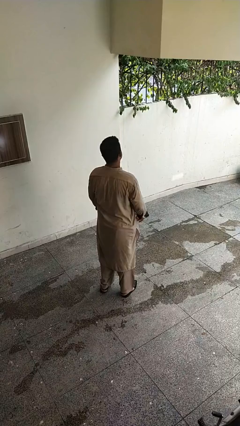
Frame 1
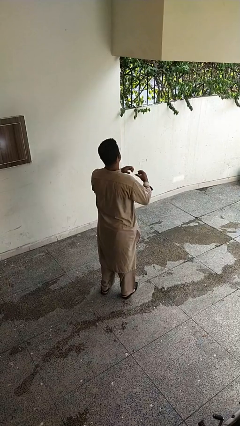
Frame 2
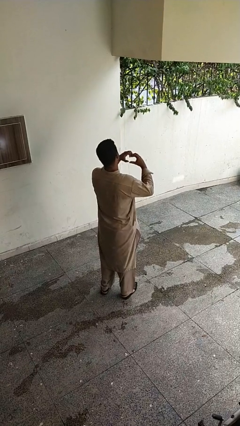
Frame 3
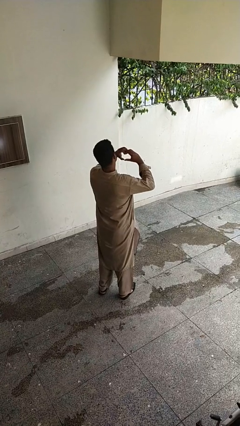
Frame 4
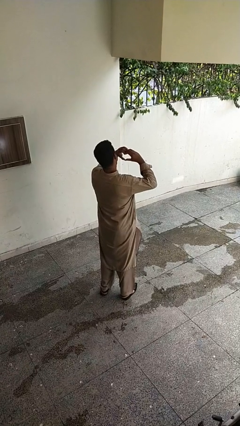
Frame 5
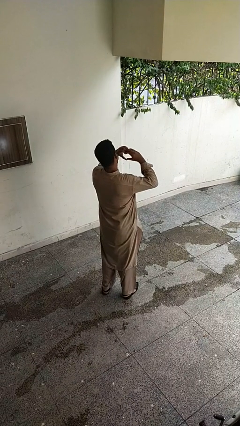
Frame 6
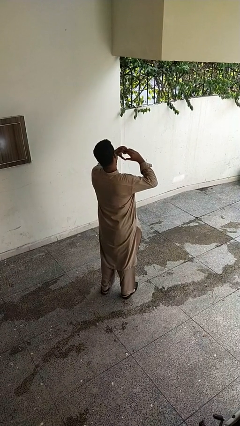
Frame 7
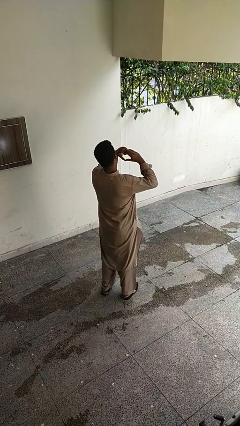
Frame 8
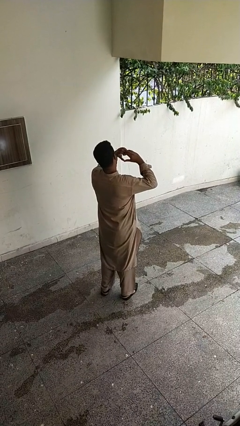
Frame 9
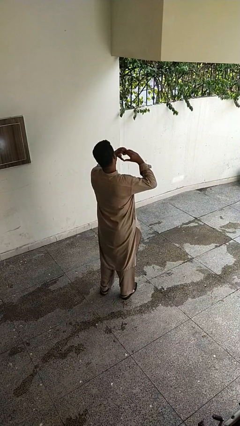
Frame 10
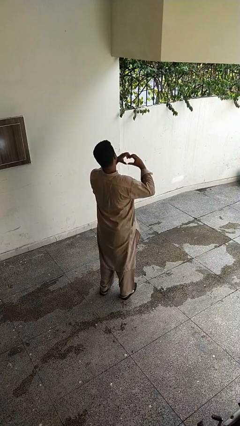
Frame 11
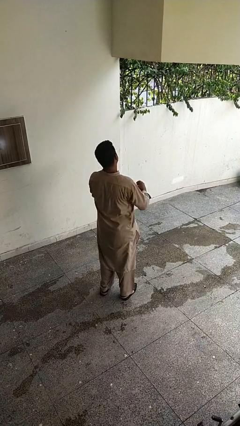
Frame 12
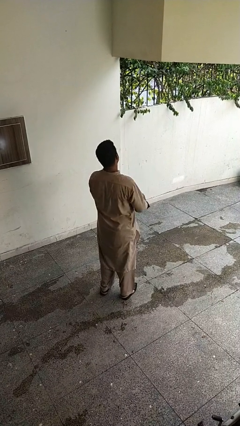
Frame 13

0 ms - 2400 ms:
person gestures heart

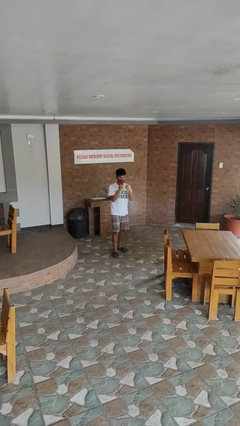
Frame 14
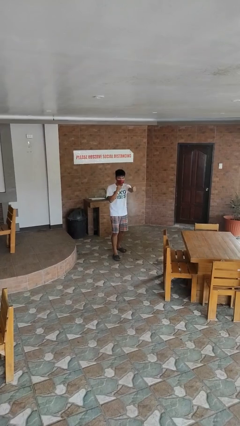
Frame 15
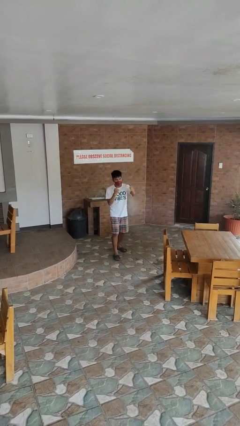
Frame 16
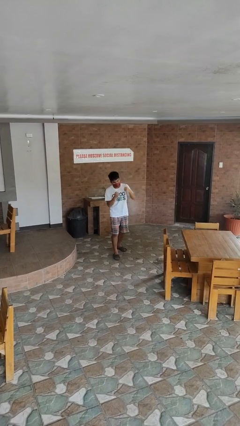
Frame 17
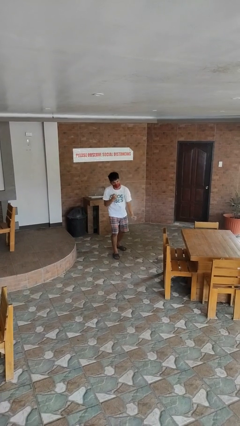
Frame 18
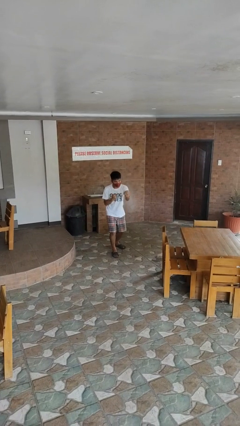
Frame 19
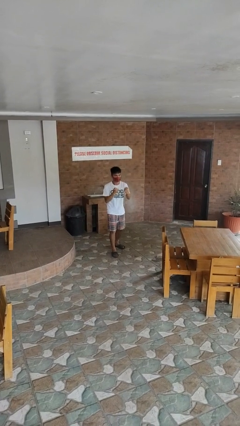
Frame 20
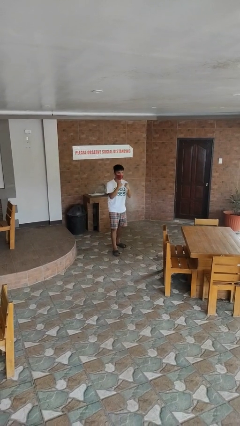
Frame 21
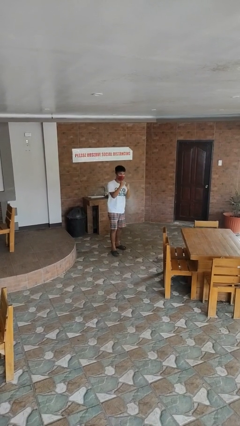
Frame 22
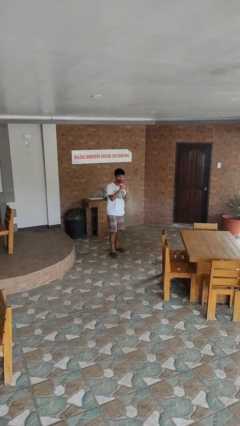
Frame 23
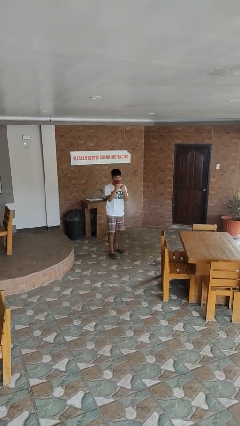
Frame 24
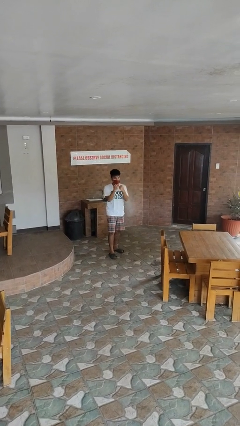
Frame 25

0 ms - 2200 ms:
person punches

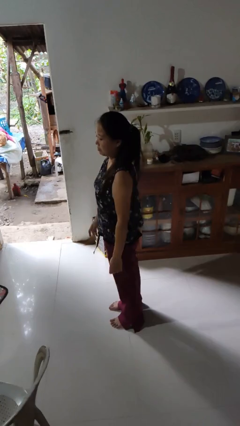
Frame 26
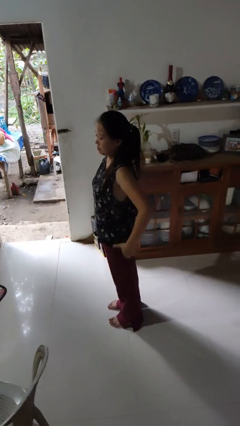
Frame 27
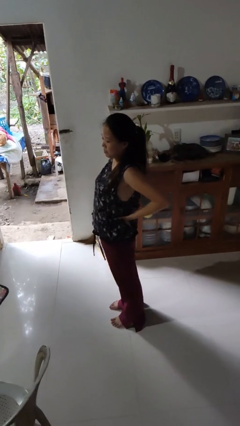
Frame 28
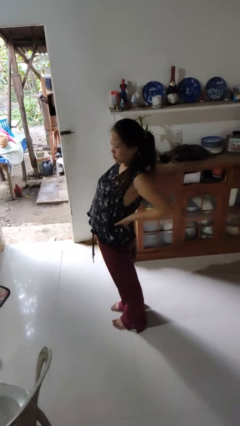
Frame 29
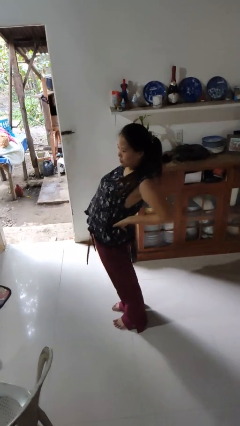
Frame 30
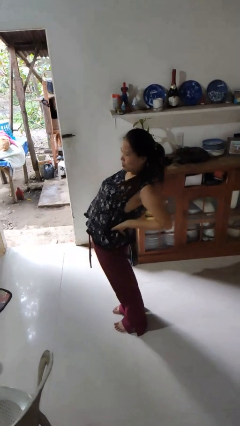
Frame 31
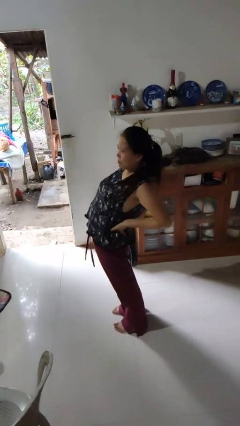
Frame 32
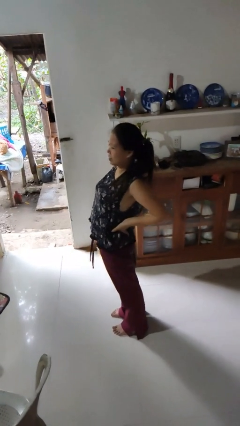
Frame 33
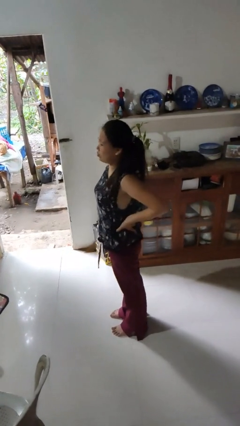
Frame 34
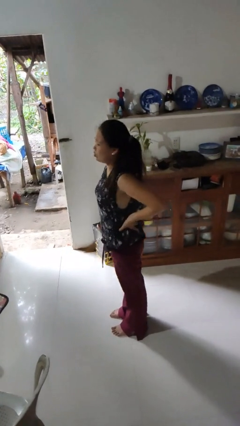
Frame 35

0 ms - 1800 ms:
person stretches back

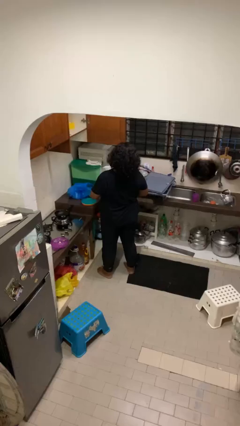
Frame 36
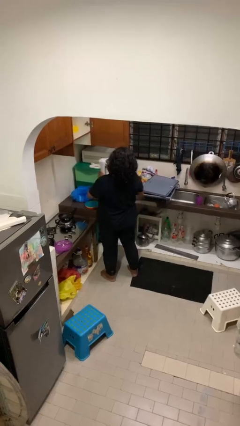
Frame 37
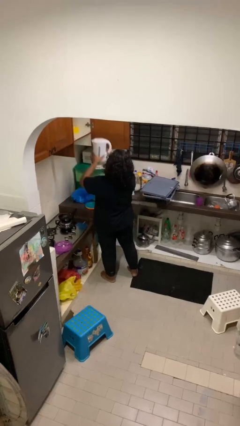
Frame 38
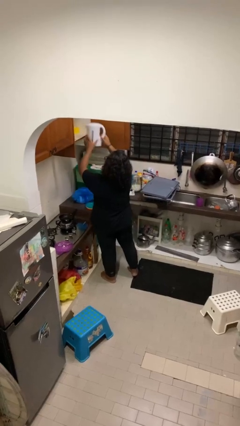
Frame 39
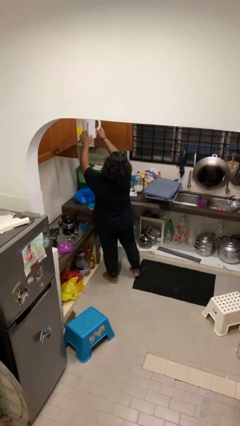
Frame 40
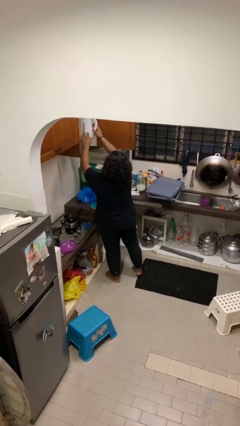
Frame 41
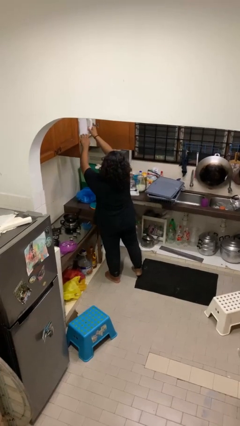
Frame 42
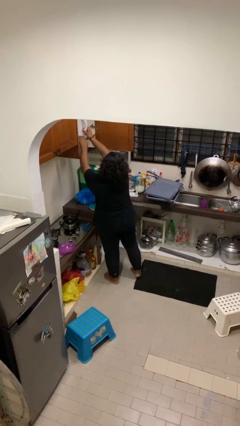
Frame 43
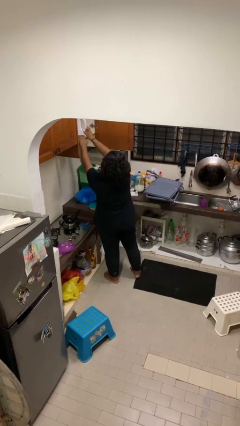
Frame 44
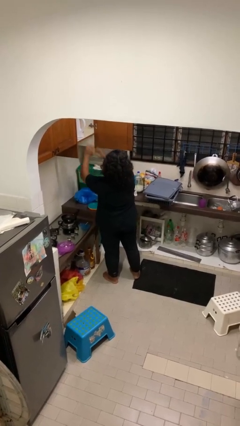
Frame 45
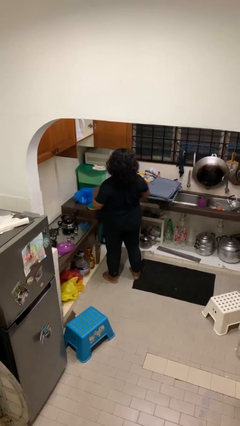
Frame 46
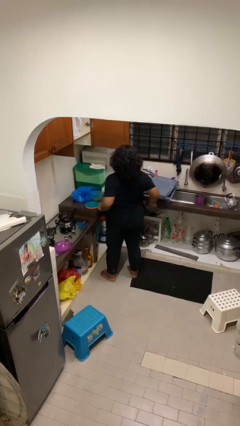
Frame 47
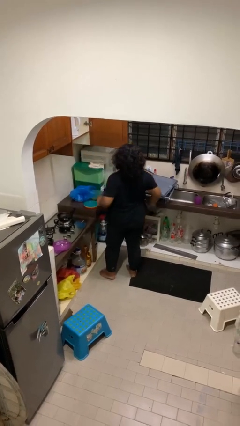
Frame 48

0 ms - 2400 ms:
person puts object in cabinet

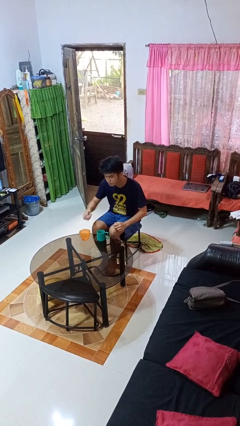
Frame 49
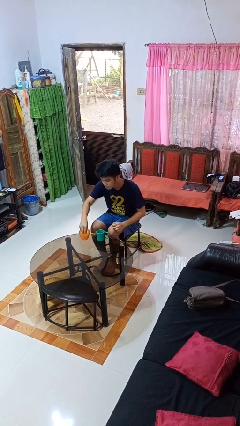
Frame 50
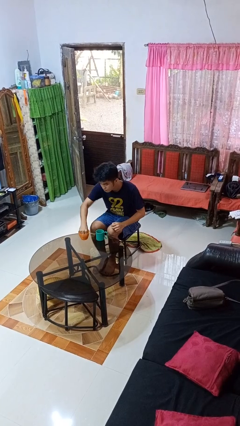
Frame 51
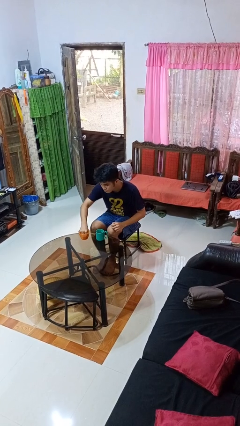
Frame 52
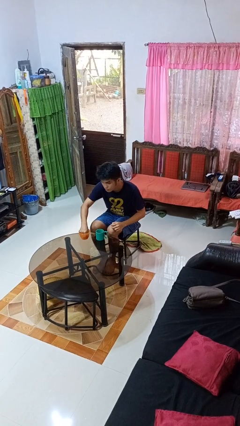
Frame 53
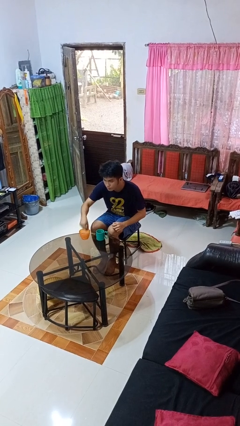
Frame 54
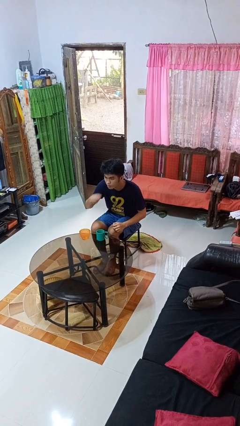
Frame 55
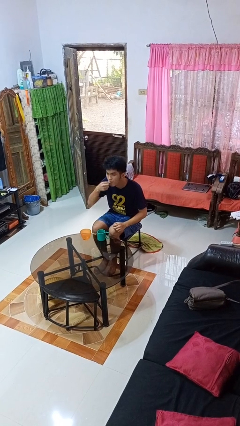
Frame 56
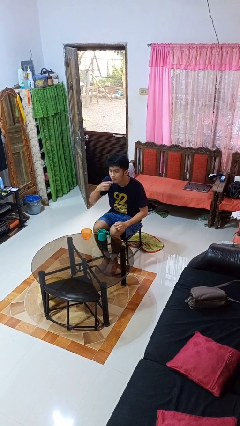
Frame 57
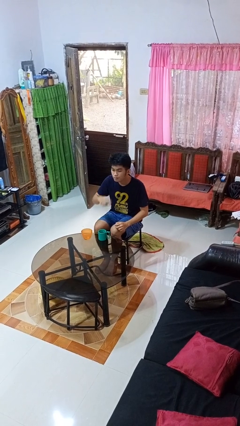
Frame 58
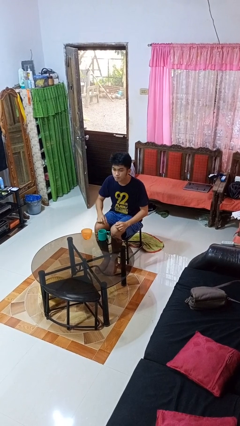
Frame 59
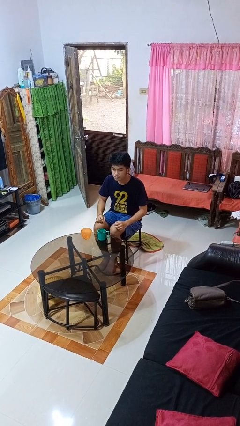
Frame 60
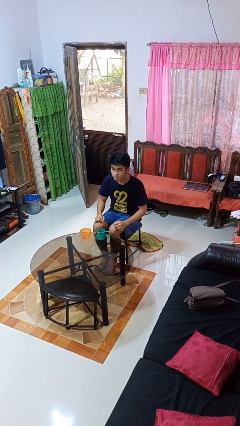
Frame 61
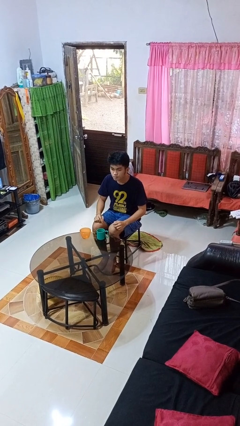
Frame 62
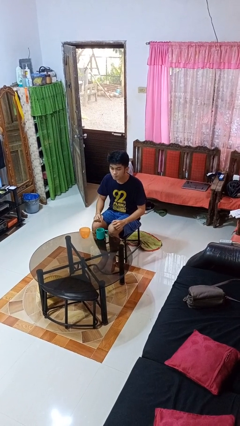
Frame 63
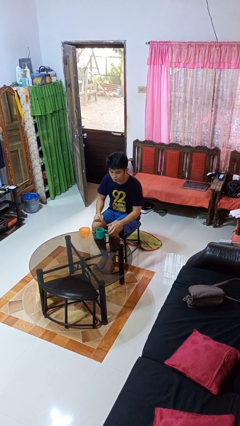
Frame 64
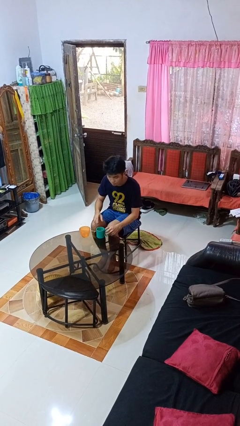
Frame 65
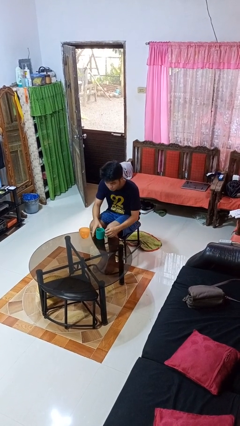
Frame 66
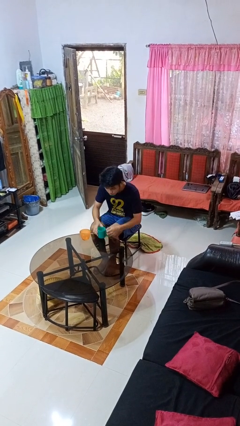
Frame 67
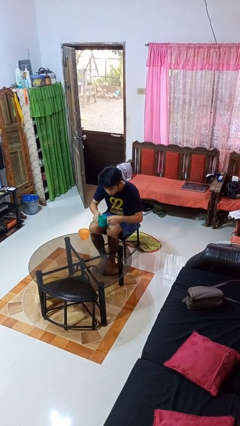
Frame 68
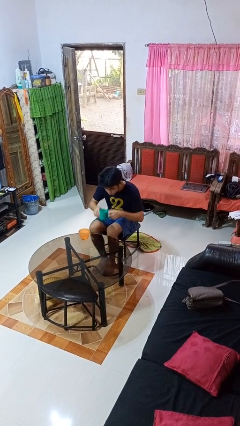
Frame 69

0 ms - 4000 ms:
person takes medicine pills

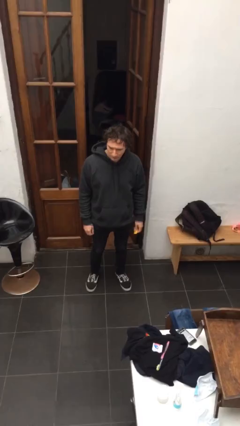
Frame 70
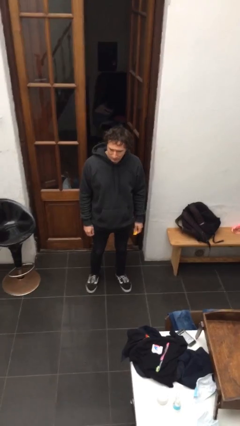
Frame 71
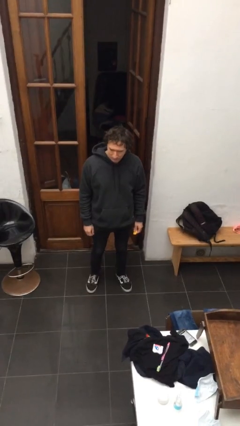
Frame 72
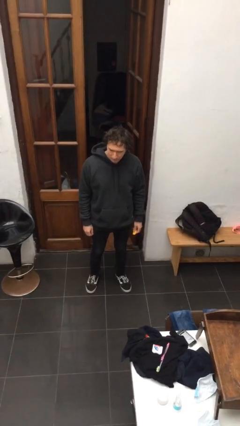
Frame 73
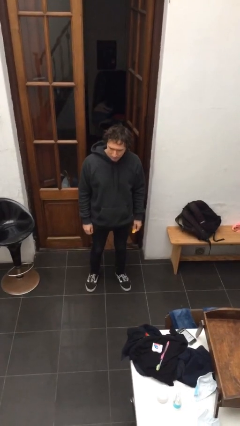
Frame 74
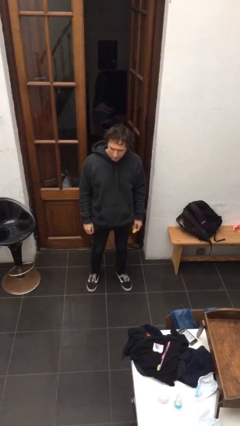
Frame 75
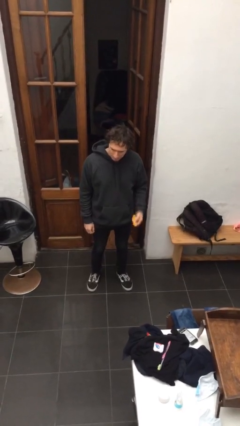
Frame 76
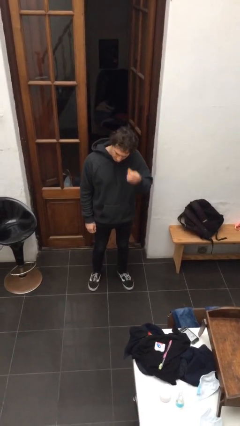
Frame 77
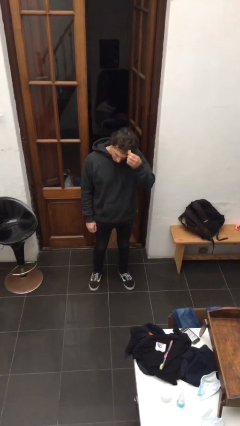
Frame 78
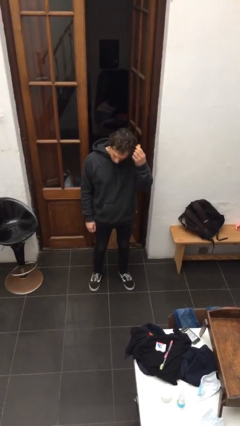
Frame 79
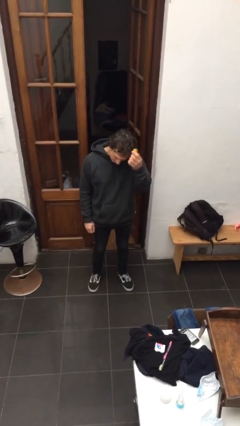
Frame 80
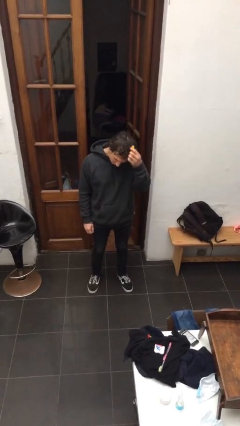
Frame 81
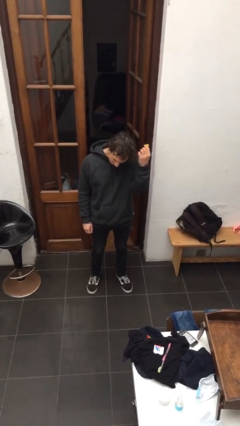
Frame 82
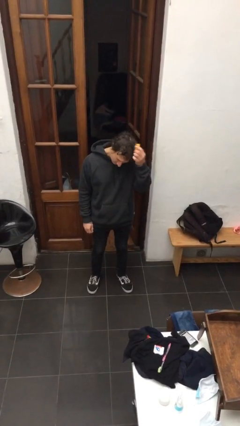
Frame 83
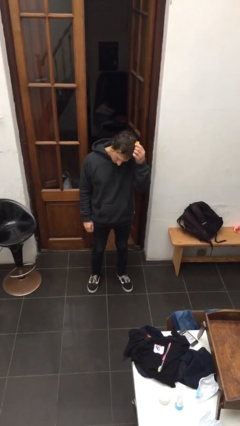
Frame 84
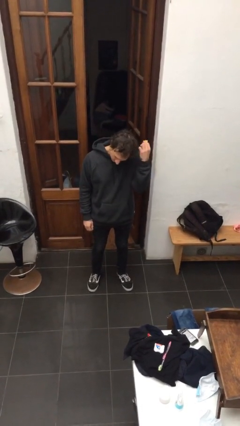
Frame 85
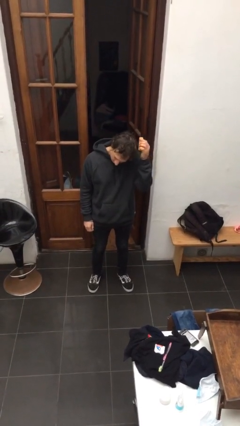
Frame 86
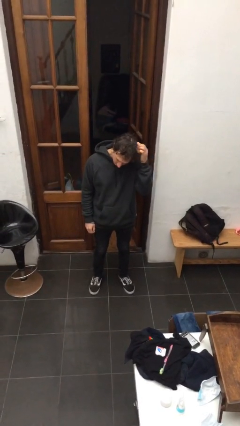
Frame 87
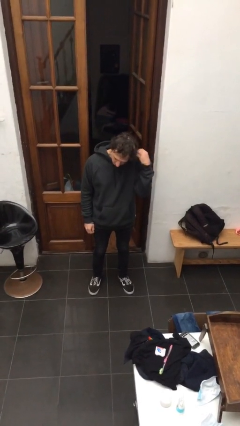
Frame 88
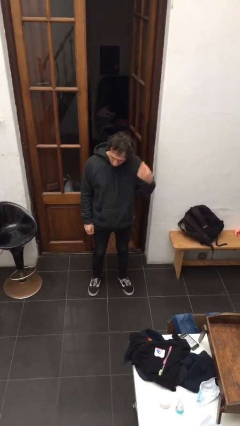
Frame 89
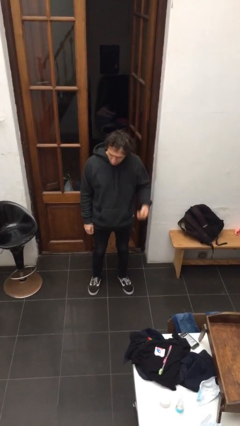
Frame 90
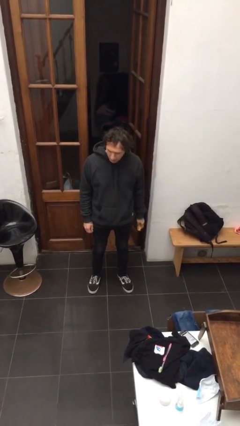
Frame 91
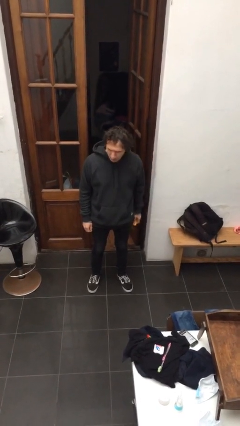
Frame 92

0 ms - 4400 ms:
person brushes hair

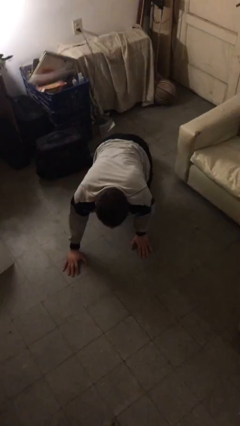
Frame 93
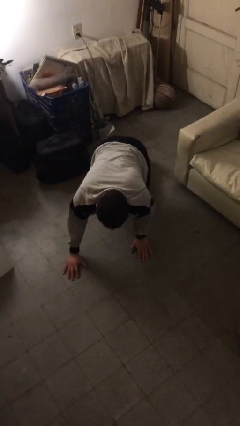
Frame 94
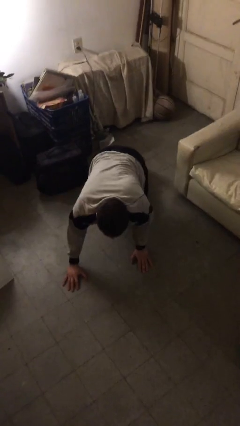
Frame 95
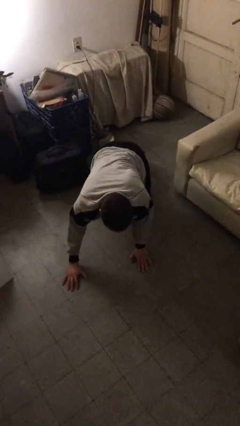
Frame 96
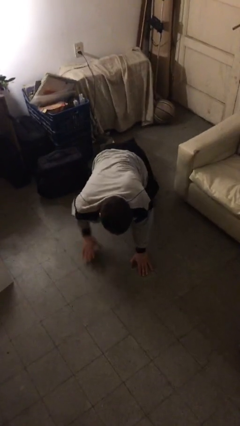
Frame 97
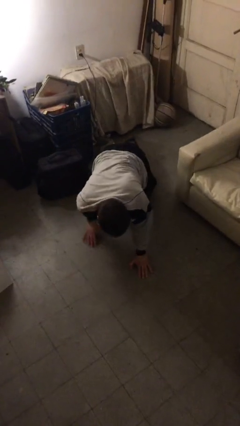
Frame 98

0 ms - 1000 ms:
person crawls
